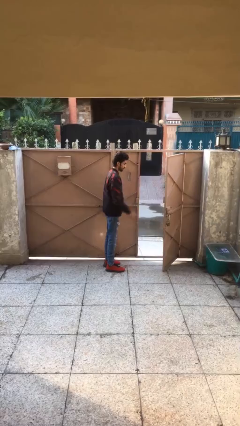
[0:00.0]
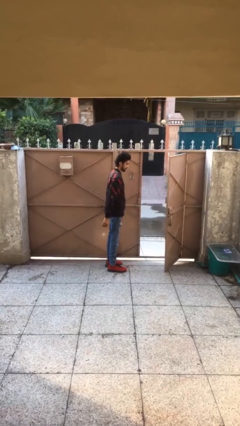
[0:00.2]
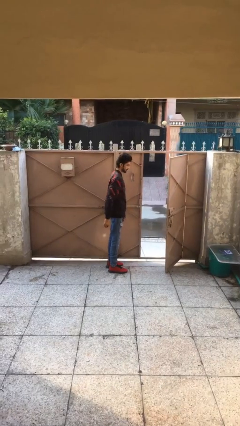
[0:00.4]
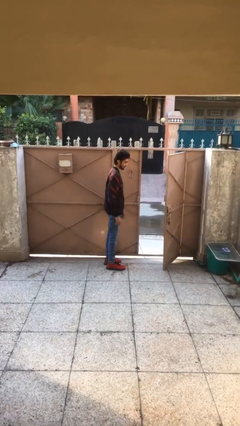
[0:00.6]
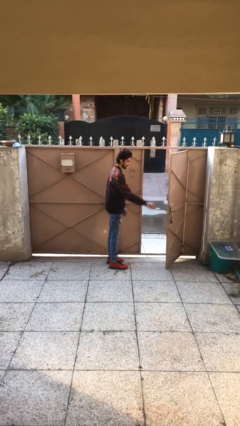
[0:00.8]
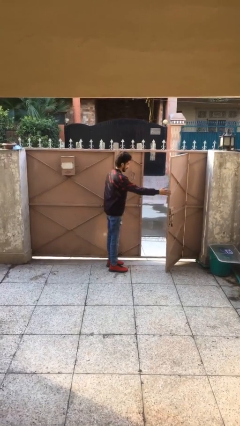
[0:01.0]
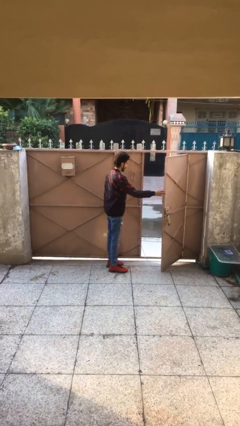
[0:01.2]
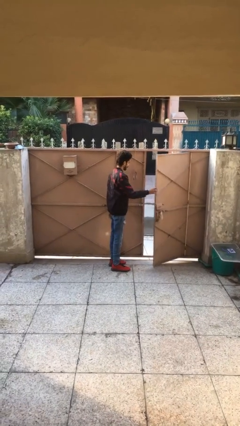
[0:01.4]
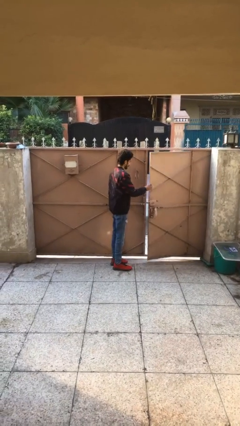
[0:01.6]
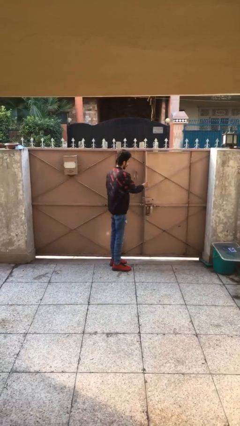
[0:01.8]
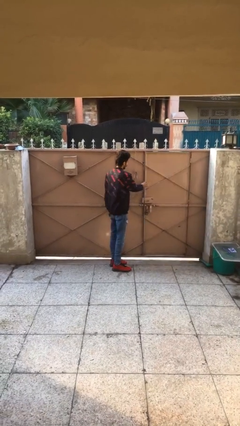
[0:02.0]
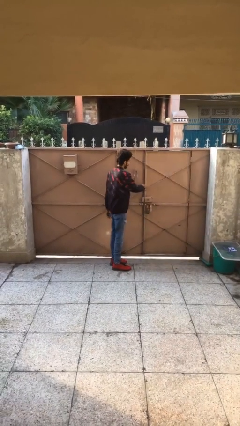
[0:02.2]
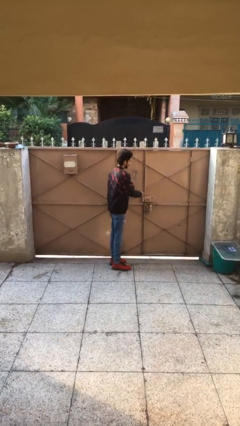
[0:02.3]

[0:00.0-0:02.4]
person closes facility door

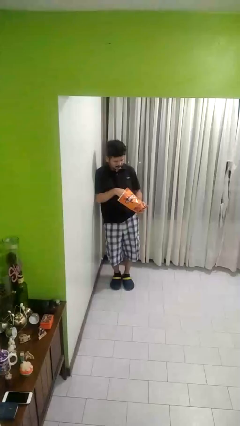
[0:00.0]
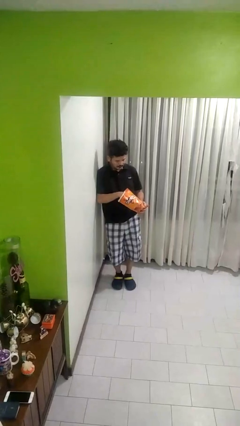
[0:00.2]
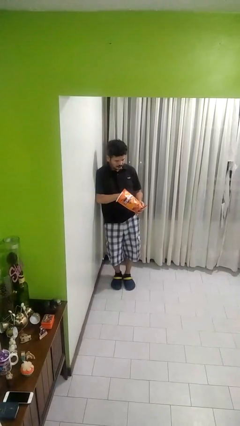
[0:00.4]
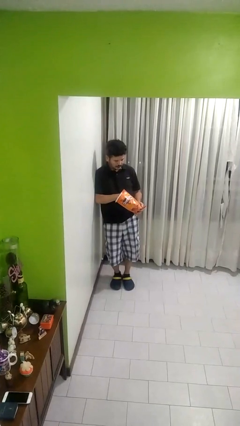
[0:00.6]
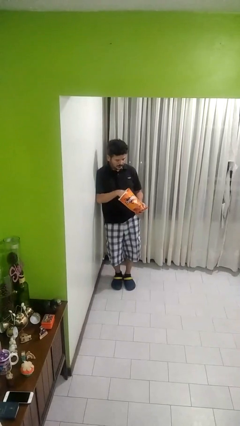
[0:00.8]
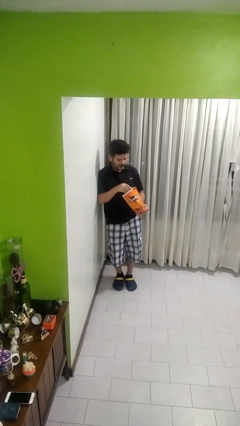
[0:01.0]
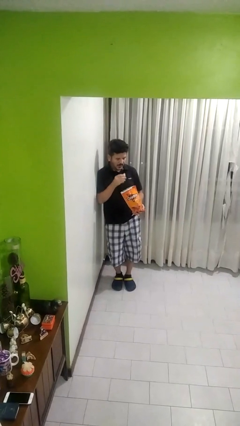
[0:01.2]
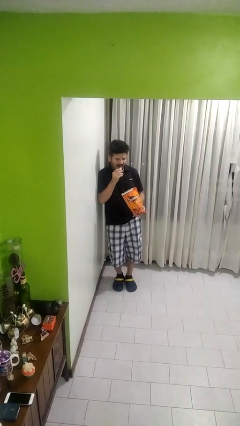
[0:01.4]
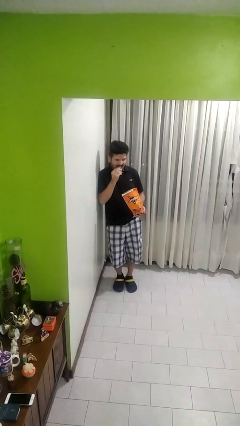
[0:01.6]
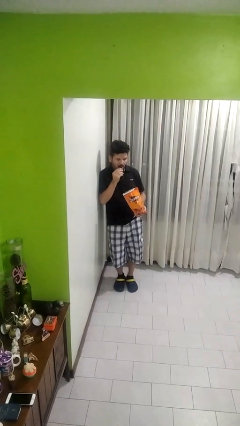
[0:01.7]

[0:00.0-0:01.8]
person eats snack from bag

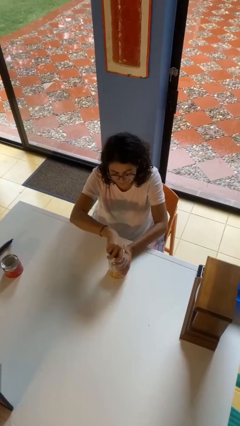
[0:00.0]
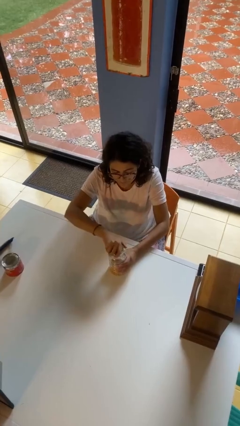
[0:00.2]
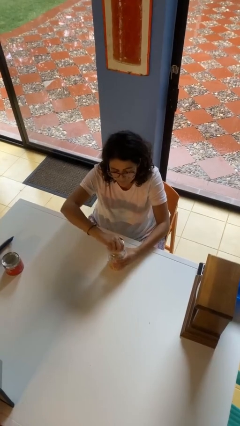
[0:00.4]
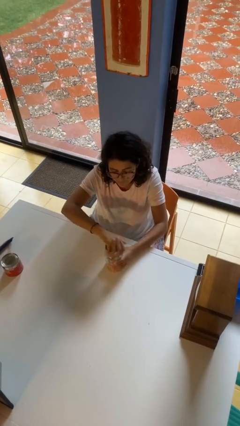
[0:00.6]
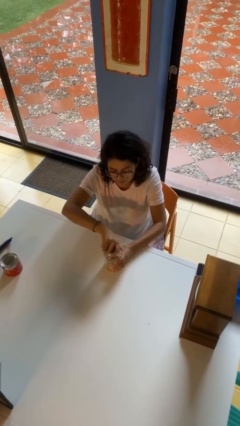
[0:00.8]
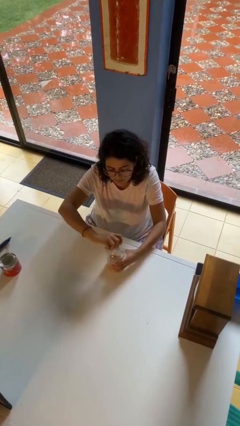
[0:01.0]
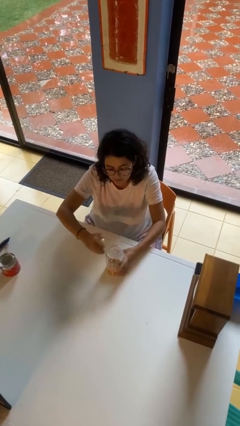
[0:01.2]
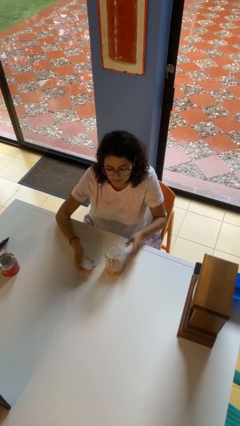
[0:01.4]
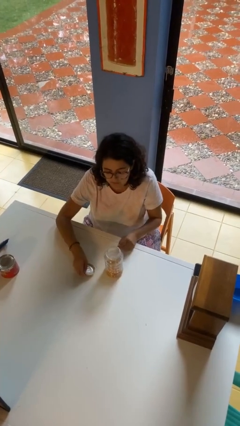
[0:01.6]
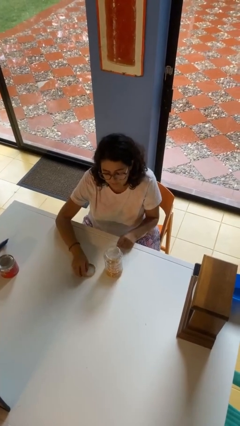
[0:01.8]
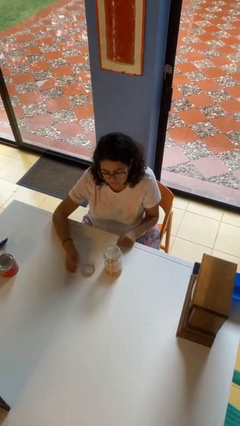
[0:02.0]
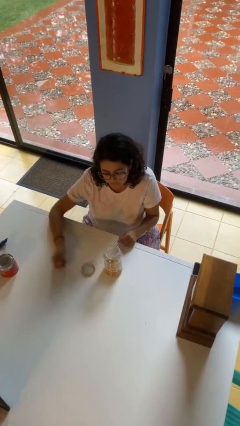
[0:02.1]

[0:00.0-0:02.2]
person opens jar

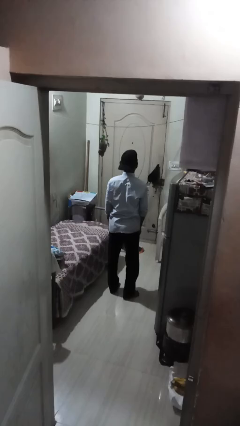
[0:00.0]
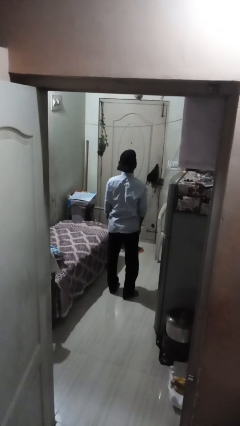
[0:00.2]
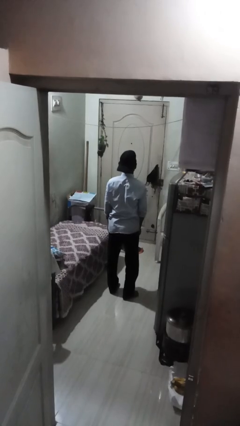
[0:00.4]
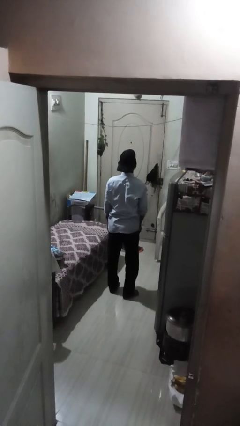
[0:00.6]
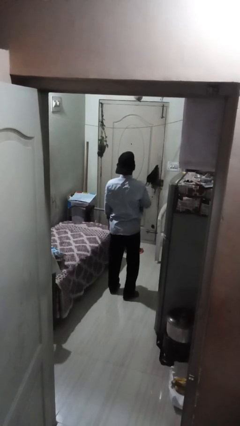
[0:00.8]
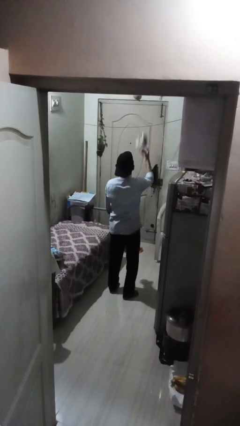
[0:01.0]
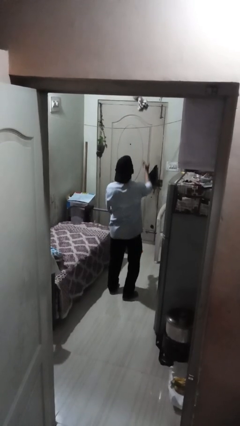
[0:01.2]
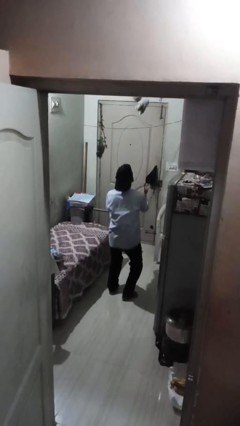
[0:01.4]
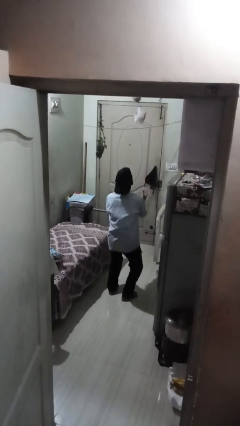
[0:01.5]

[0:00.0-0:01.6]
person drops object

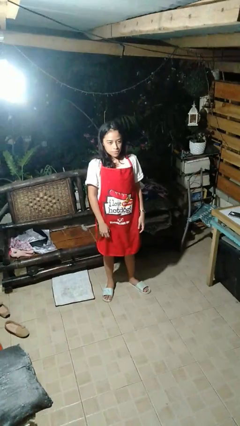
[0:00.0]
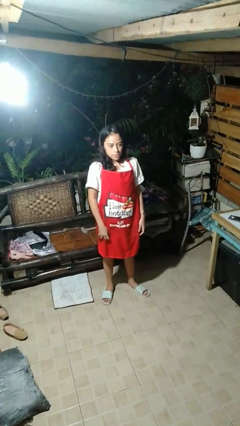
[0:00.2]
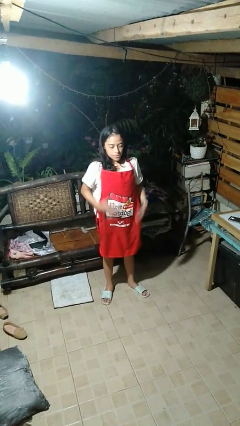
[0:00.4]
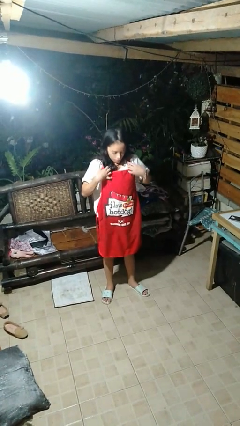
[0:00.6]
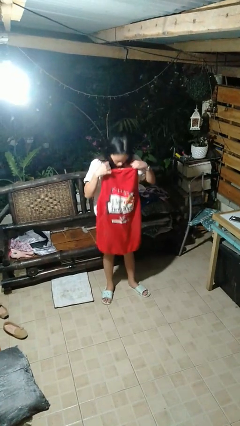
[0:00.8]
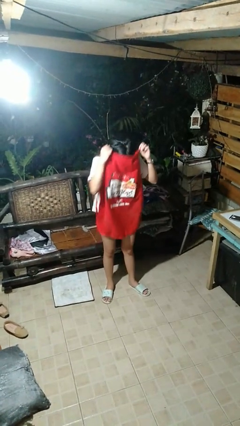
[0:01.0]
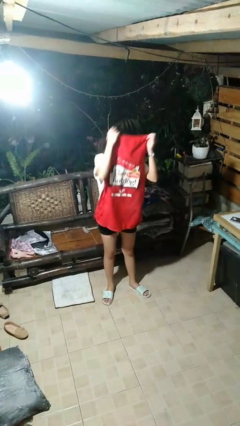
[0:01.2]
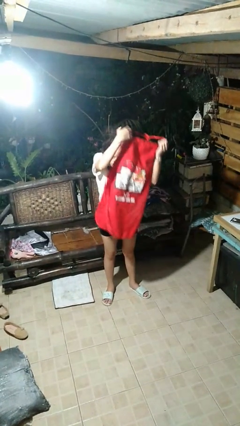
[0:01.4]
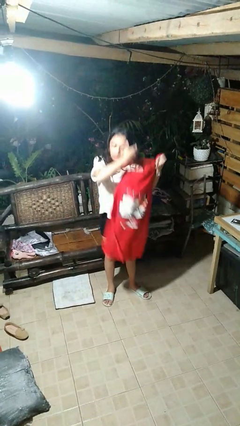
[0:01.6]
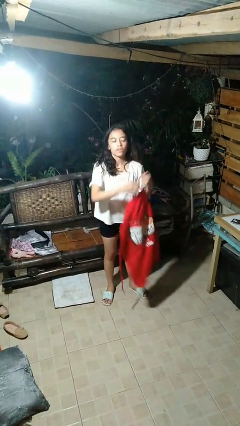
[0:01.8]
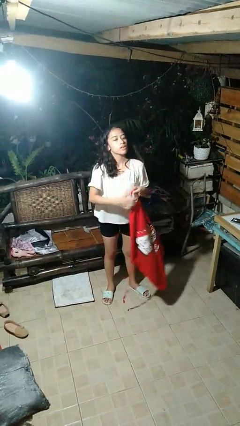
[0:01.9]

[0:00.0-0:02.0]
person takes off apron

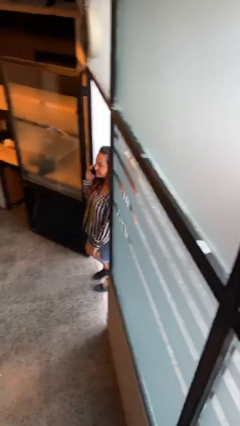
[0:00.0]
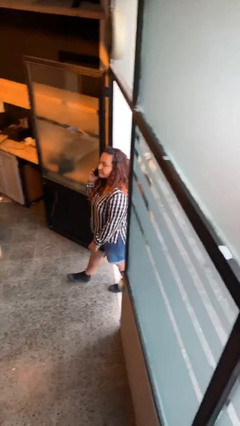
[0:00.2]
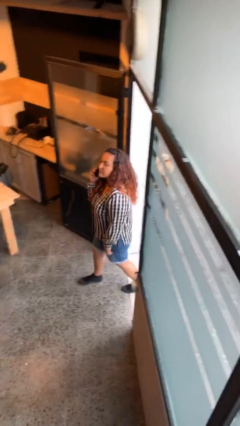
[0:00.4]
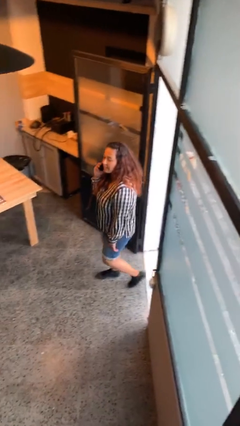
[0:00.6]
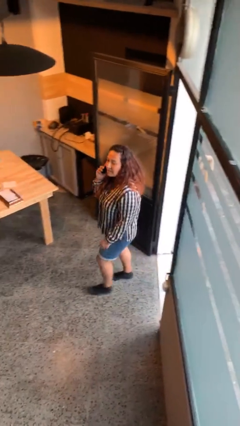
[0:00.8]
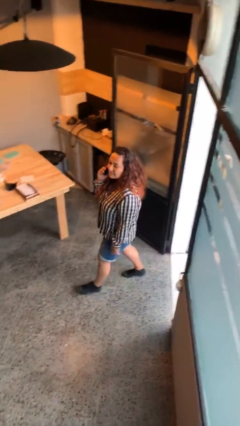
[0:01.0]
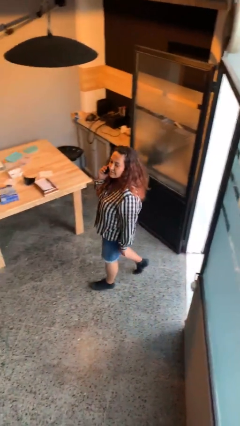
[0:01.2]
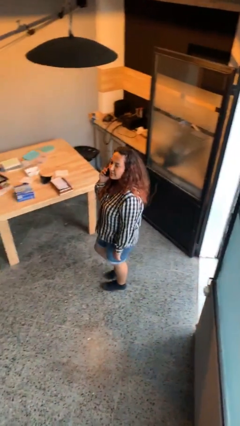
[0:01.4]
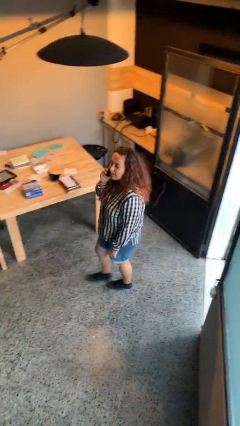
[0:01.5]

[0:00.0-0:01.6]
person enters scene through structure

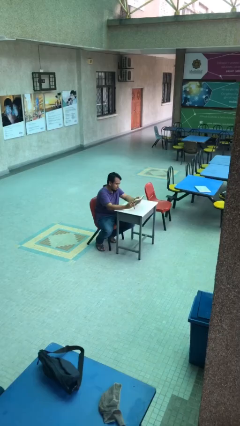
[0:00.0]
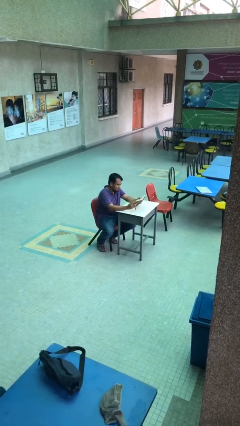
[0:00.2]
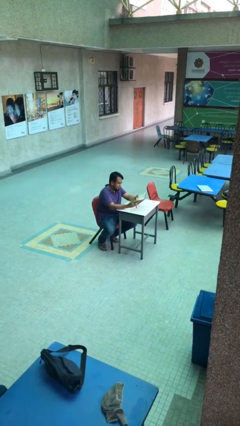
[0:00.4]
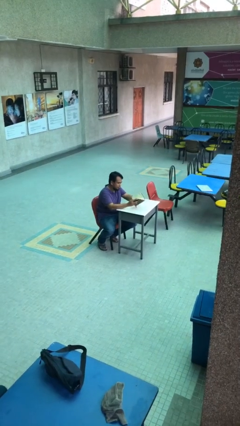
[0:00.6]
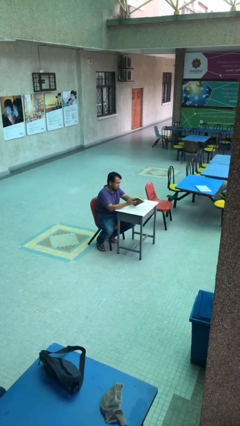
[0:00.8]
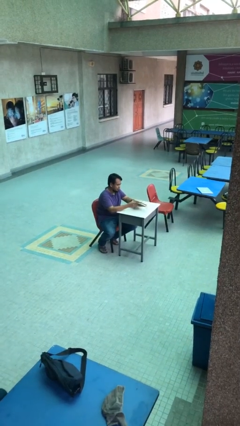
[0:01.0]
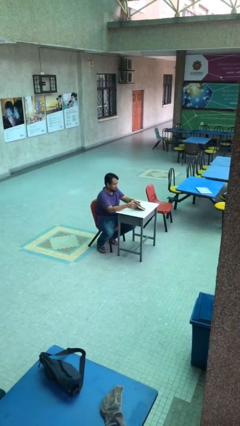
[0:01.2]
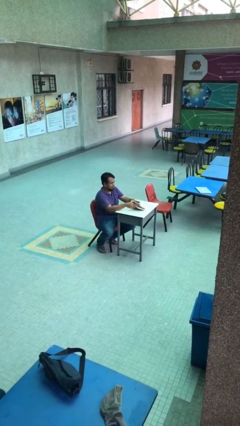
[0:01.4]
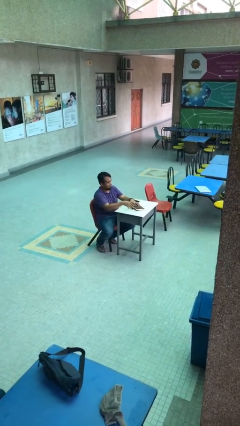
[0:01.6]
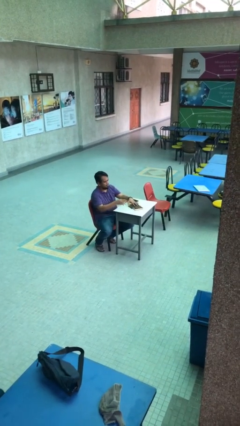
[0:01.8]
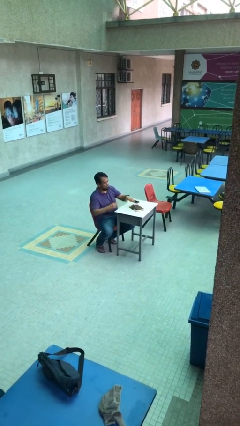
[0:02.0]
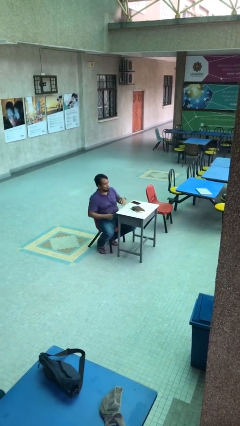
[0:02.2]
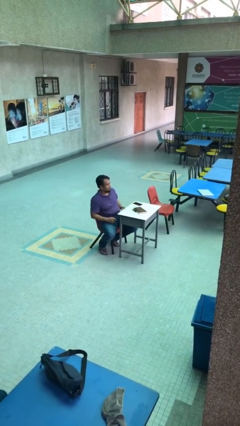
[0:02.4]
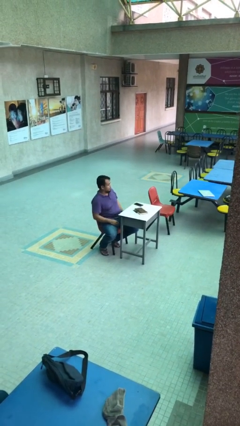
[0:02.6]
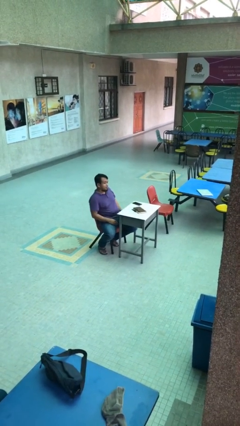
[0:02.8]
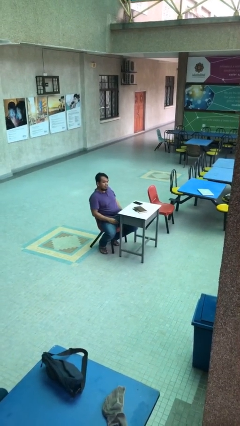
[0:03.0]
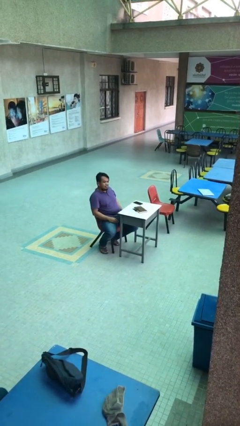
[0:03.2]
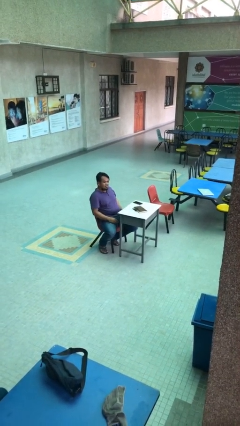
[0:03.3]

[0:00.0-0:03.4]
person puts down object on table

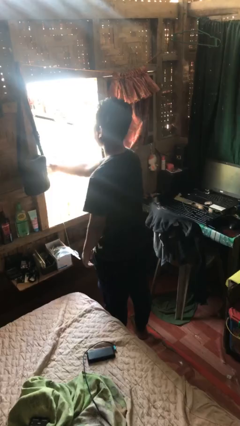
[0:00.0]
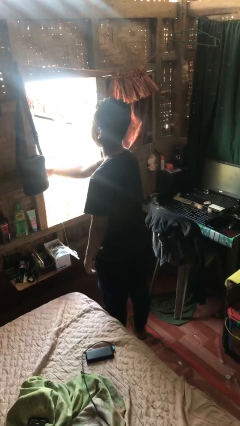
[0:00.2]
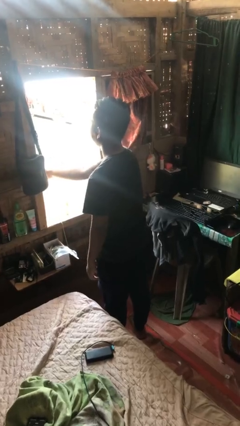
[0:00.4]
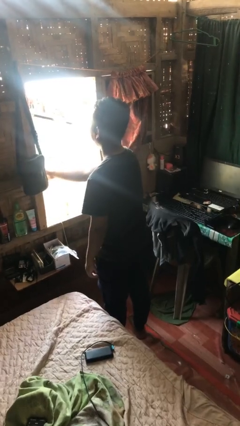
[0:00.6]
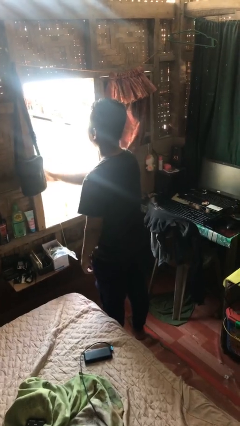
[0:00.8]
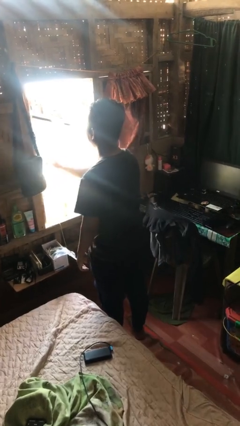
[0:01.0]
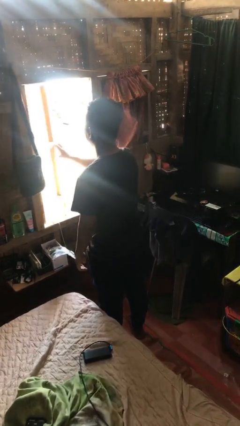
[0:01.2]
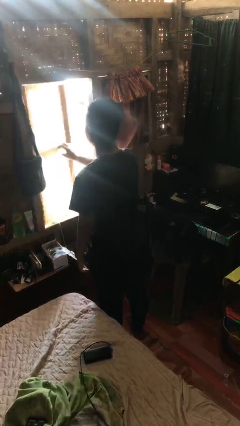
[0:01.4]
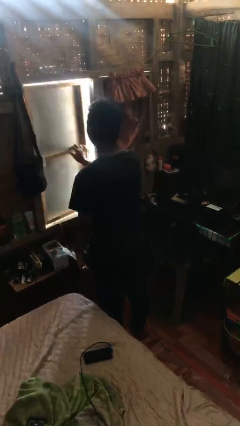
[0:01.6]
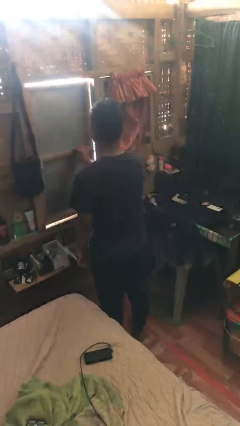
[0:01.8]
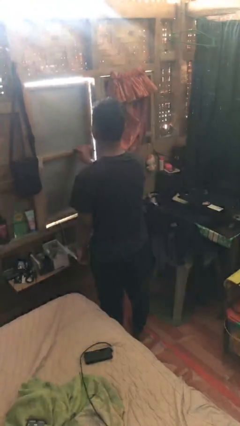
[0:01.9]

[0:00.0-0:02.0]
person closes home window
